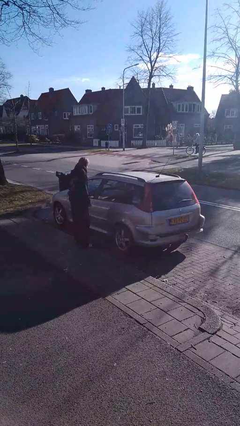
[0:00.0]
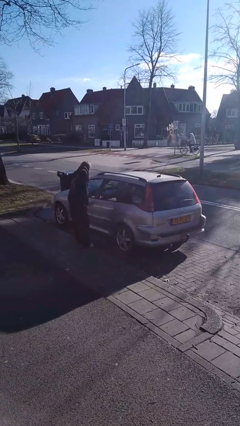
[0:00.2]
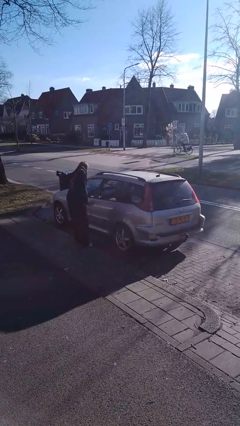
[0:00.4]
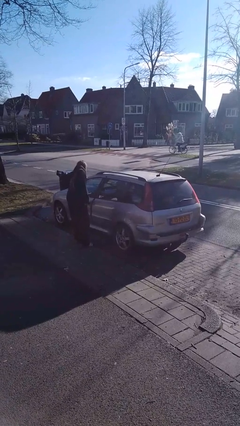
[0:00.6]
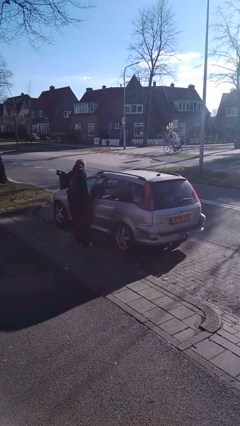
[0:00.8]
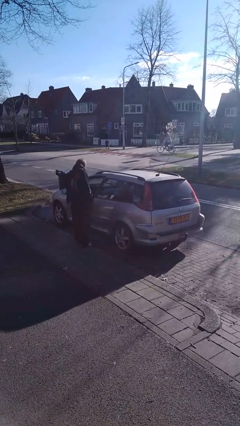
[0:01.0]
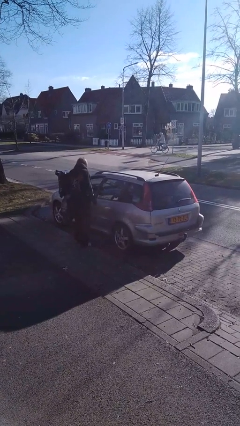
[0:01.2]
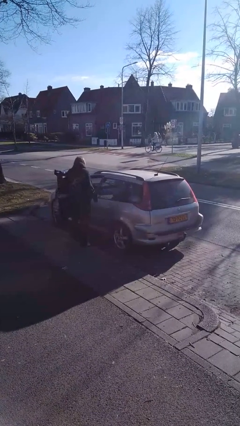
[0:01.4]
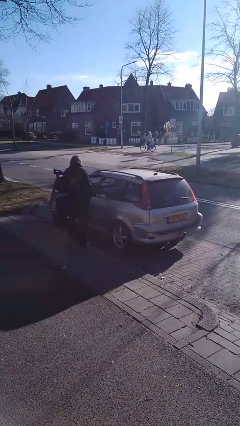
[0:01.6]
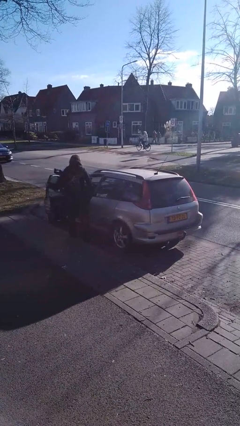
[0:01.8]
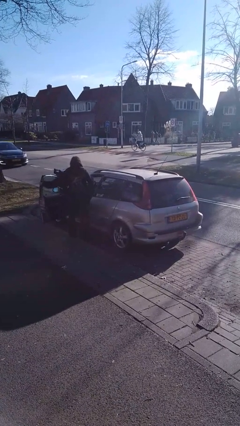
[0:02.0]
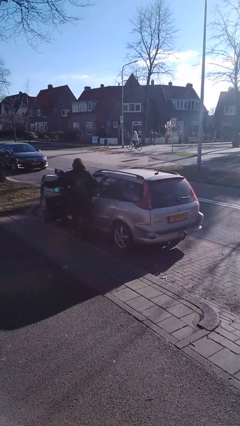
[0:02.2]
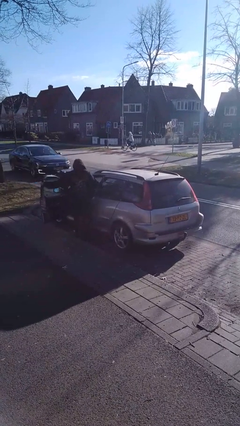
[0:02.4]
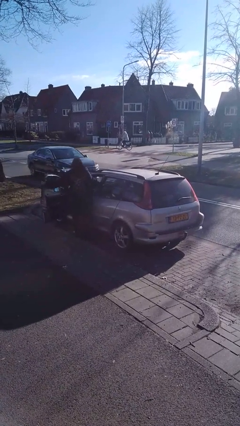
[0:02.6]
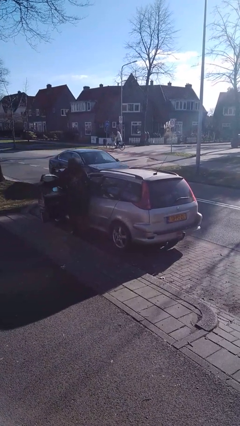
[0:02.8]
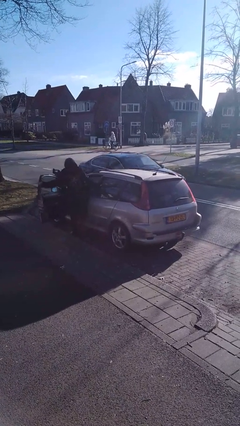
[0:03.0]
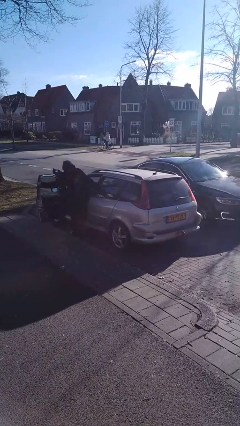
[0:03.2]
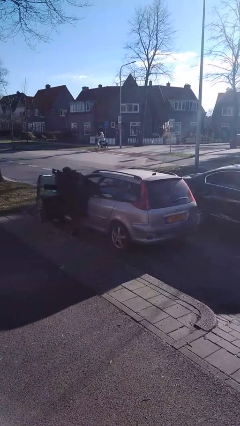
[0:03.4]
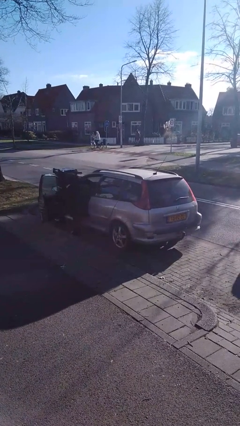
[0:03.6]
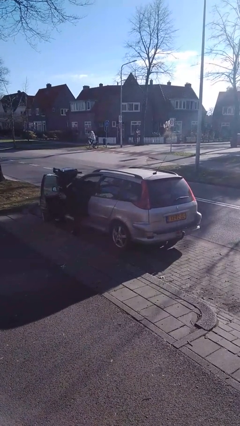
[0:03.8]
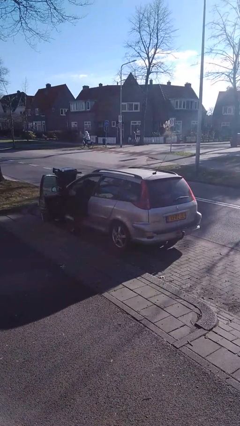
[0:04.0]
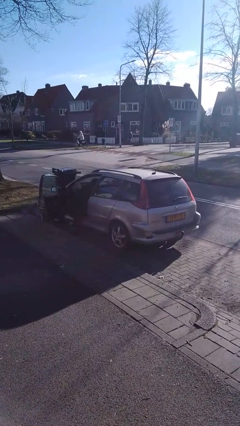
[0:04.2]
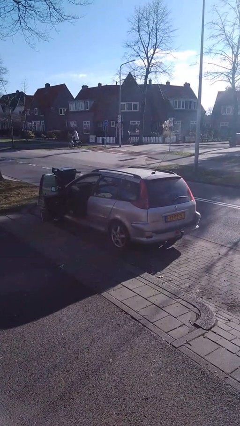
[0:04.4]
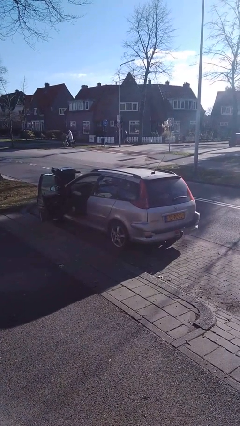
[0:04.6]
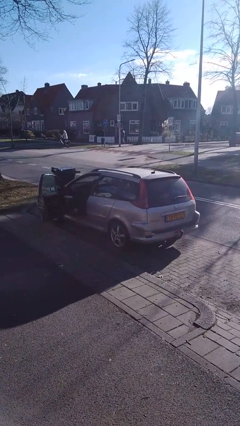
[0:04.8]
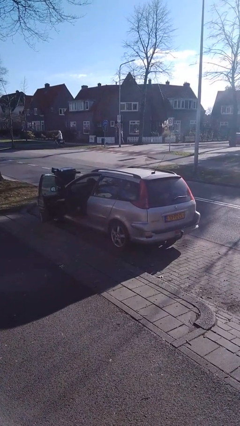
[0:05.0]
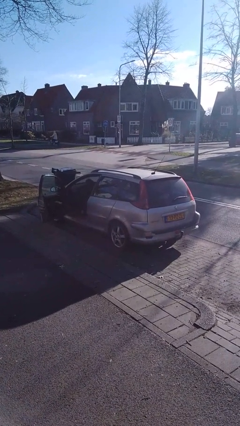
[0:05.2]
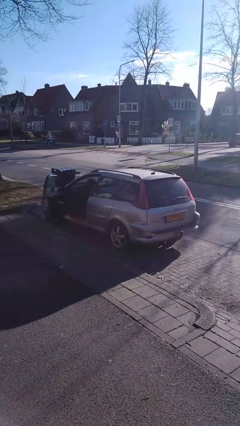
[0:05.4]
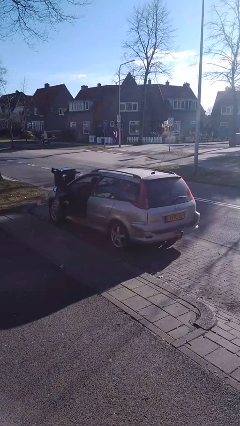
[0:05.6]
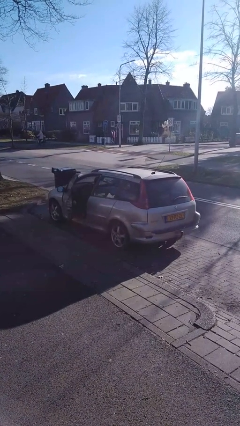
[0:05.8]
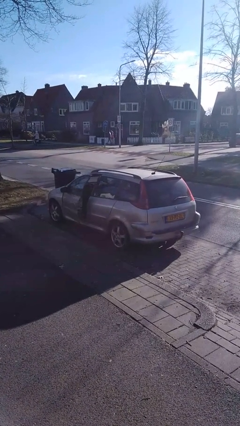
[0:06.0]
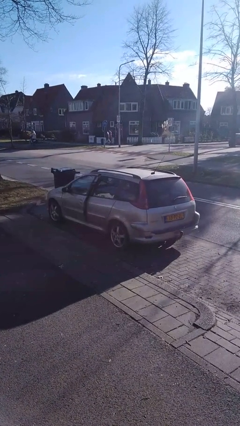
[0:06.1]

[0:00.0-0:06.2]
car picks up person

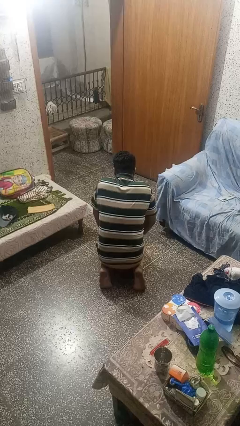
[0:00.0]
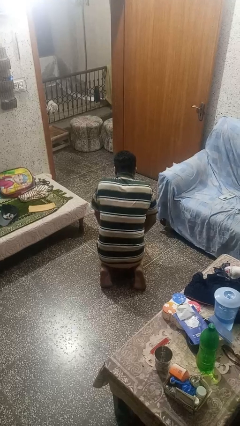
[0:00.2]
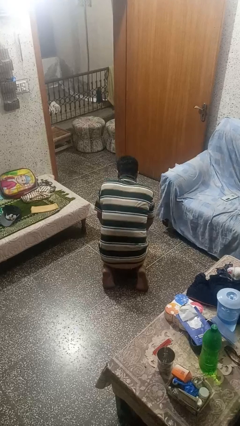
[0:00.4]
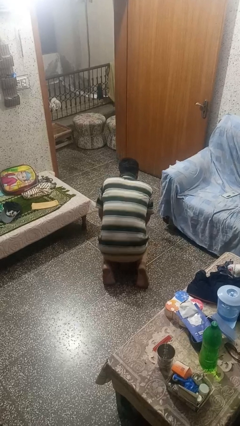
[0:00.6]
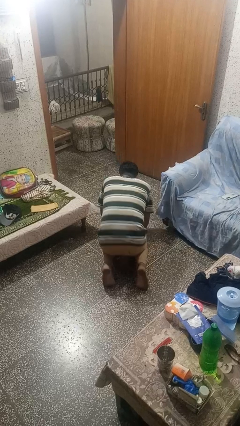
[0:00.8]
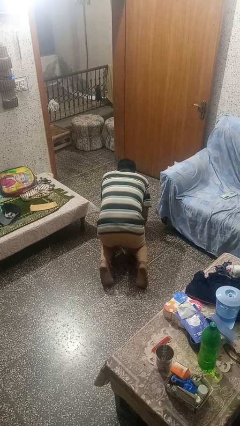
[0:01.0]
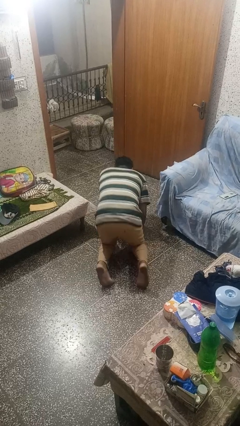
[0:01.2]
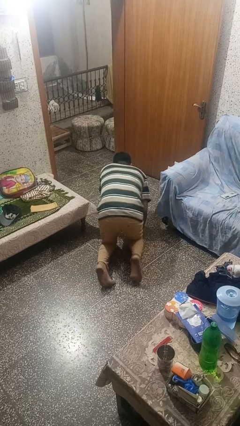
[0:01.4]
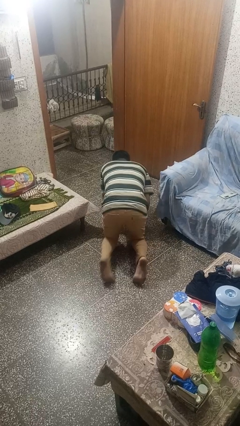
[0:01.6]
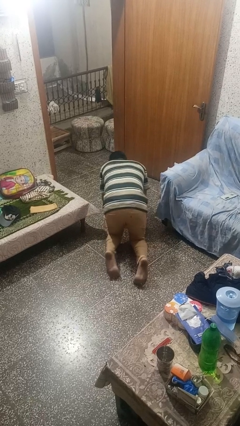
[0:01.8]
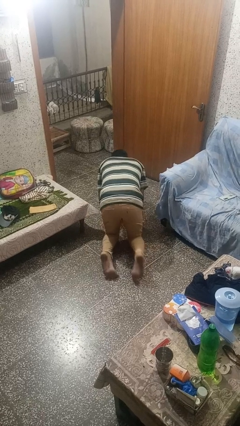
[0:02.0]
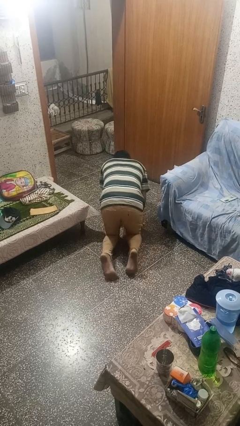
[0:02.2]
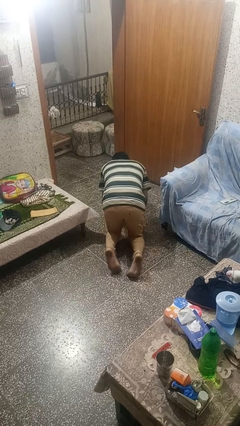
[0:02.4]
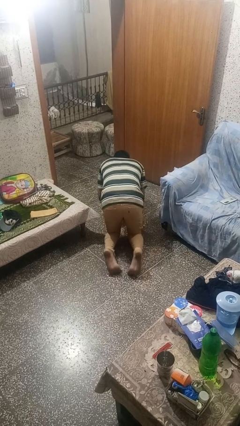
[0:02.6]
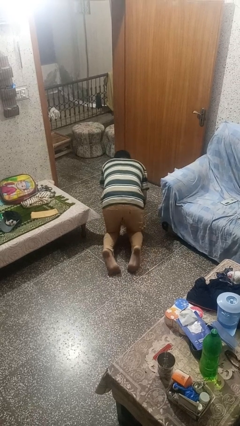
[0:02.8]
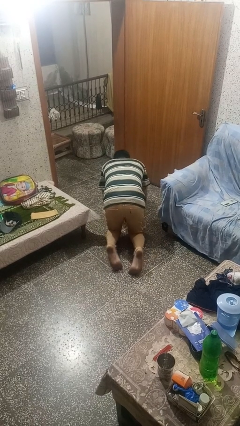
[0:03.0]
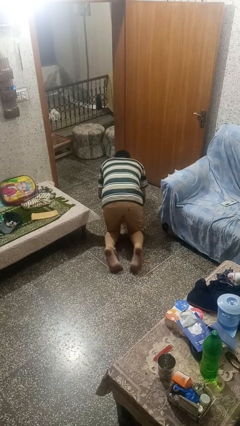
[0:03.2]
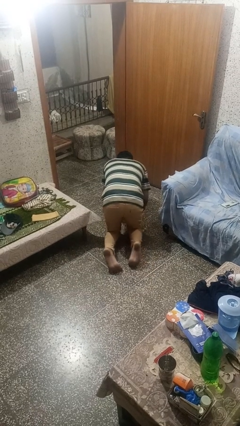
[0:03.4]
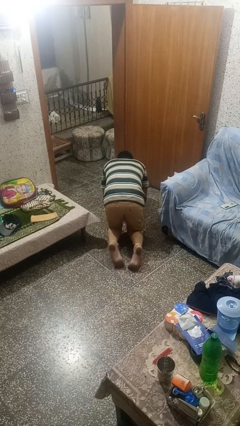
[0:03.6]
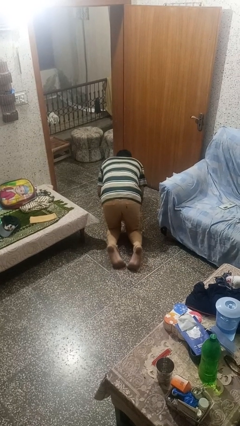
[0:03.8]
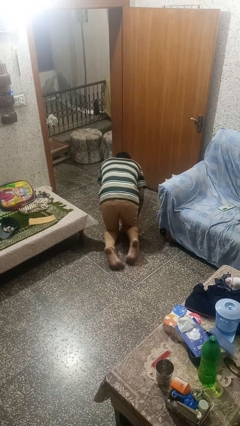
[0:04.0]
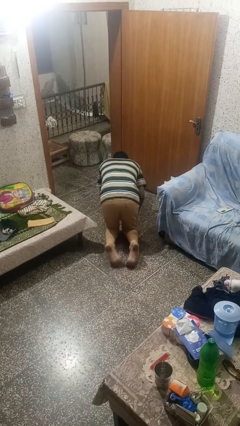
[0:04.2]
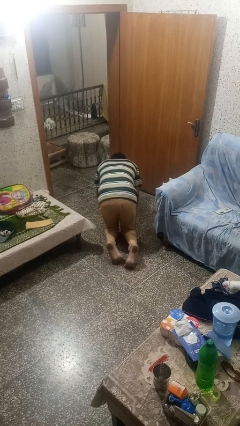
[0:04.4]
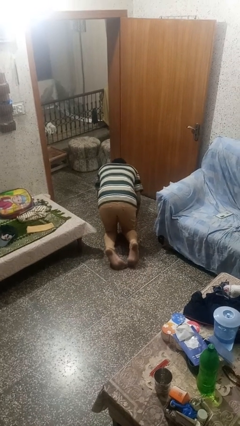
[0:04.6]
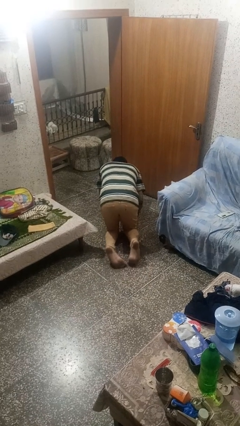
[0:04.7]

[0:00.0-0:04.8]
person crawls

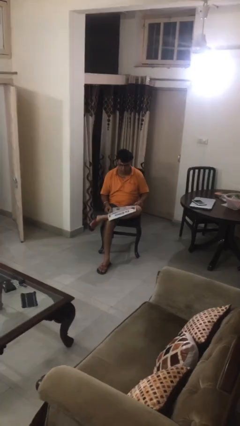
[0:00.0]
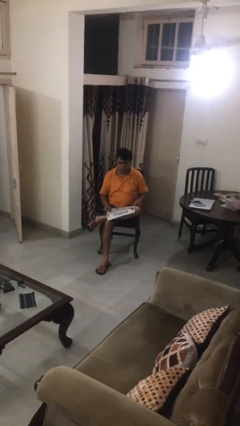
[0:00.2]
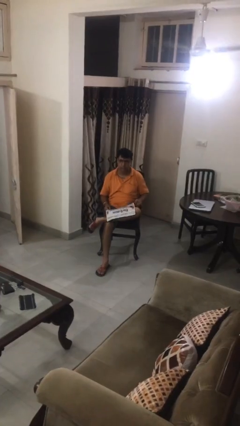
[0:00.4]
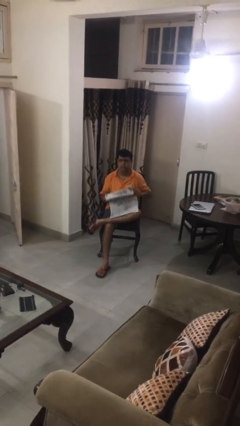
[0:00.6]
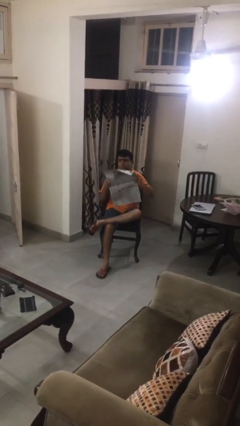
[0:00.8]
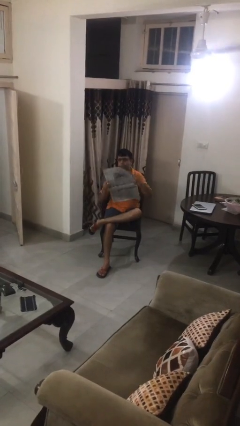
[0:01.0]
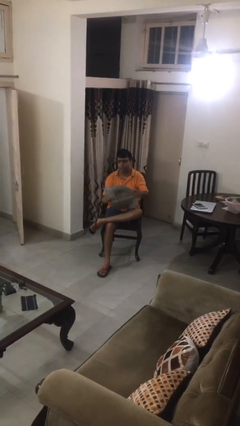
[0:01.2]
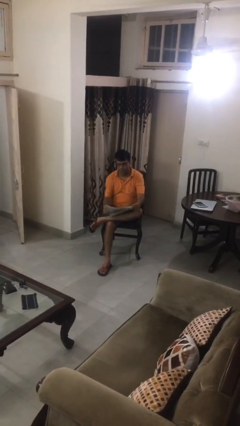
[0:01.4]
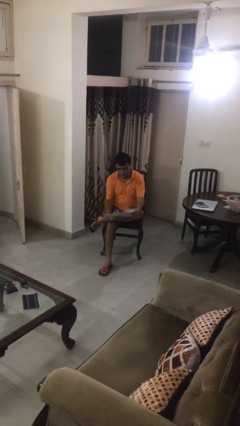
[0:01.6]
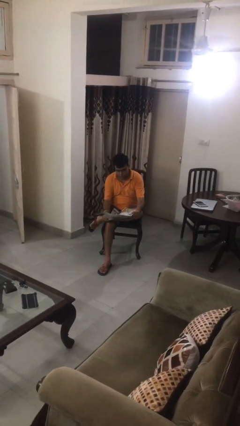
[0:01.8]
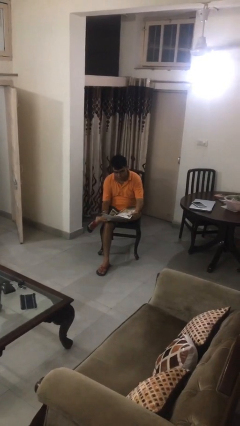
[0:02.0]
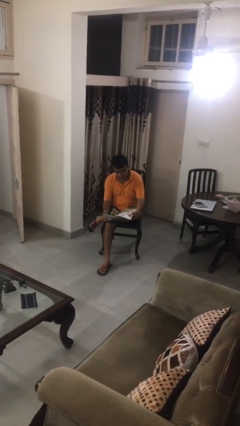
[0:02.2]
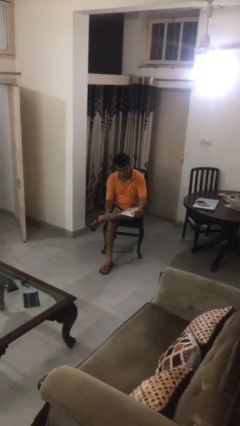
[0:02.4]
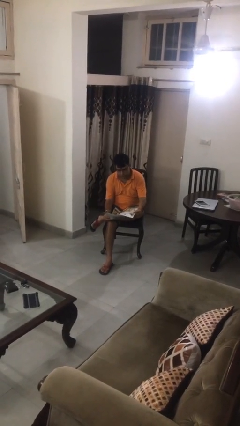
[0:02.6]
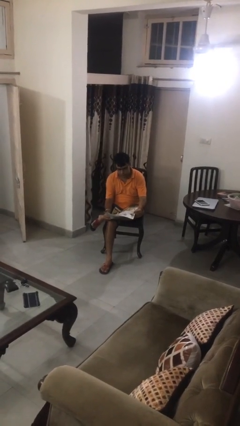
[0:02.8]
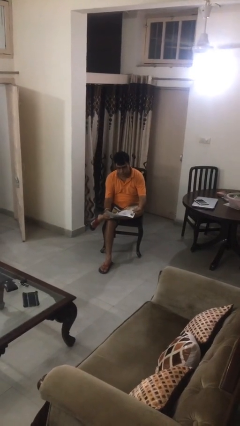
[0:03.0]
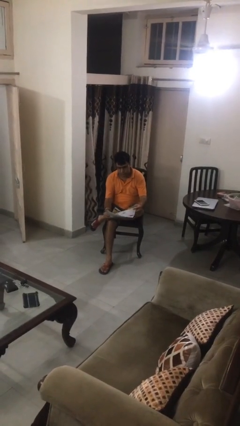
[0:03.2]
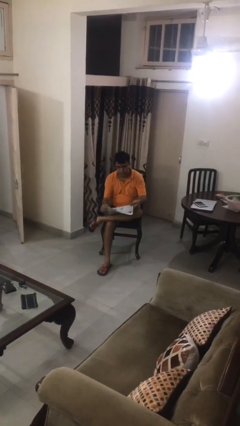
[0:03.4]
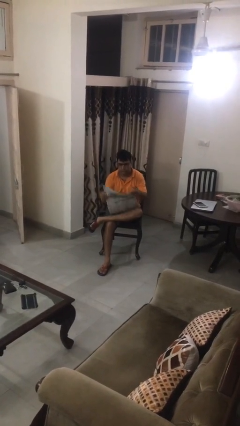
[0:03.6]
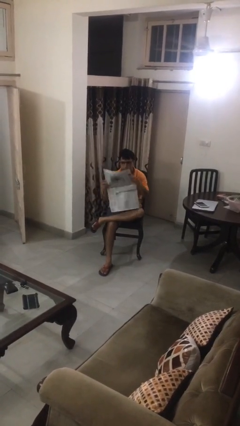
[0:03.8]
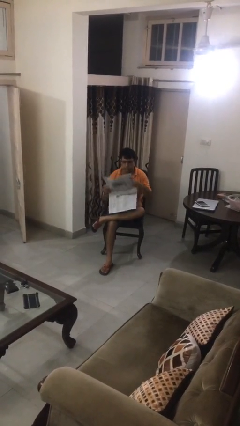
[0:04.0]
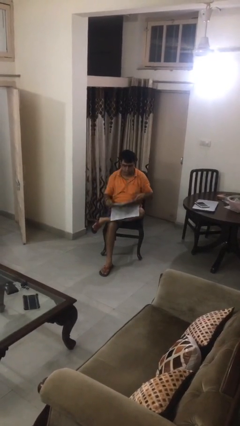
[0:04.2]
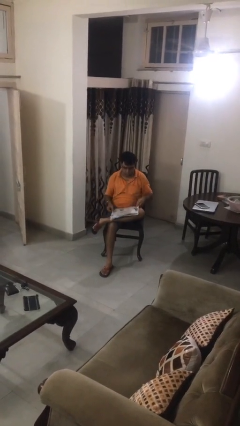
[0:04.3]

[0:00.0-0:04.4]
person reads newspaper

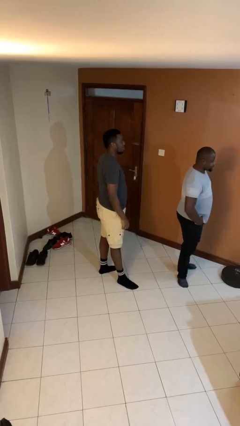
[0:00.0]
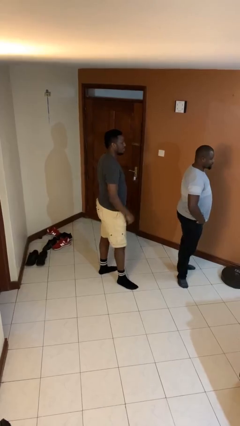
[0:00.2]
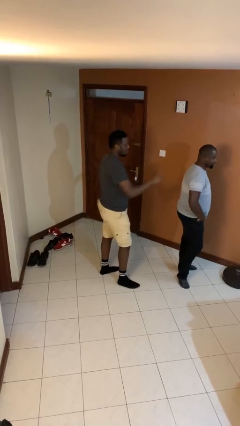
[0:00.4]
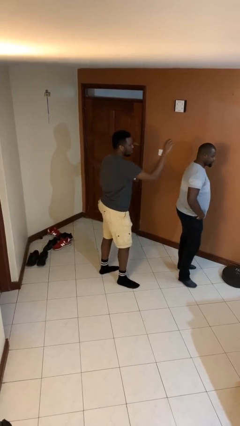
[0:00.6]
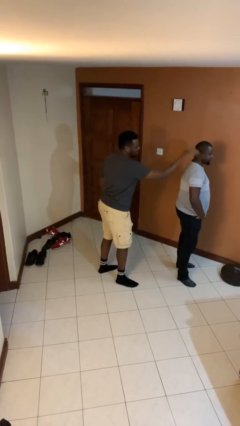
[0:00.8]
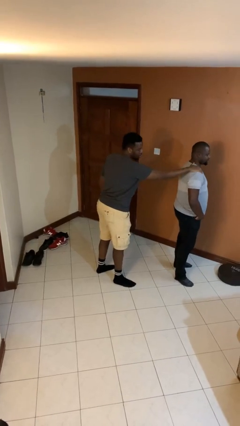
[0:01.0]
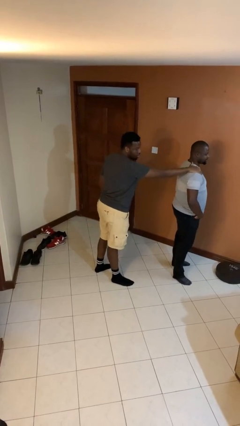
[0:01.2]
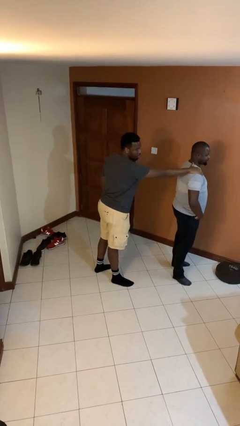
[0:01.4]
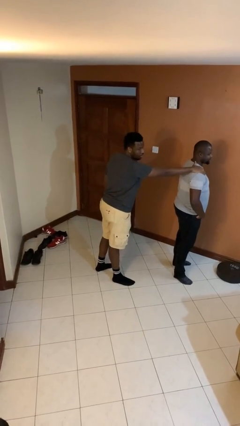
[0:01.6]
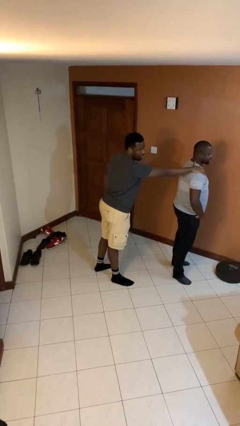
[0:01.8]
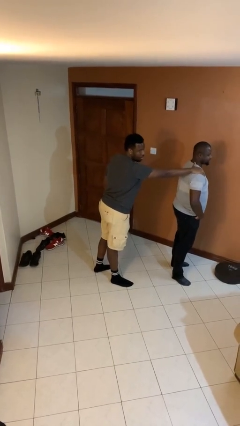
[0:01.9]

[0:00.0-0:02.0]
person grabs person by shoulder

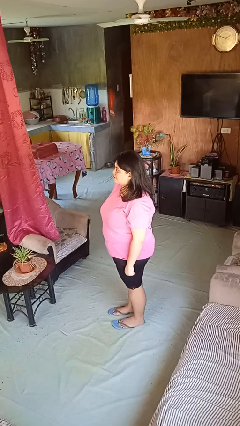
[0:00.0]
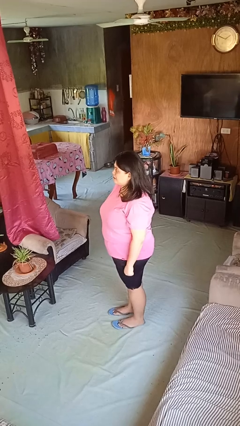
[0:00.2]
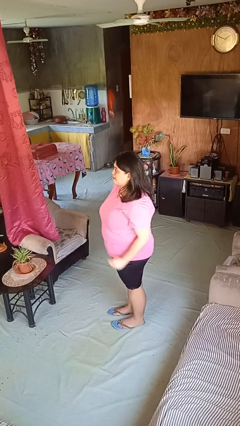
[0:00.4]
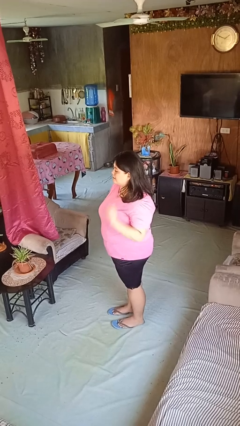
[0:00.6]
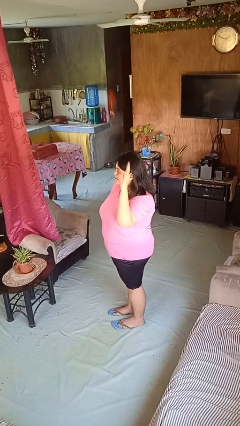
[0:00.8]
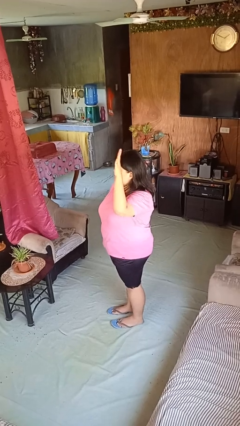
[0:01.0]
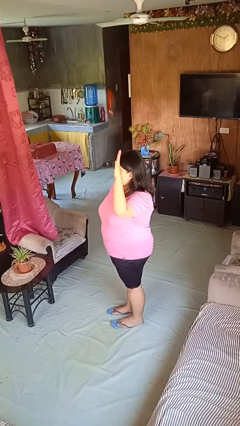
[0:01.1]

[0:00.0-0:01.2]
person gestures raise hand
